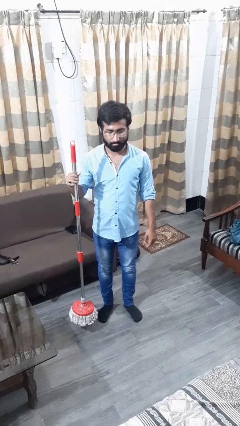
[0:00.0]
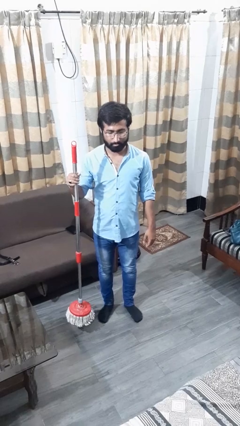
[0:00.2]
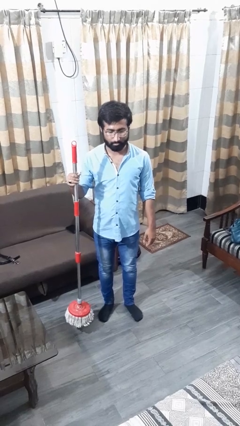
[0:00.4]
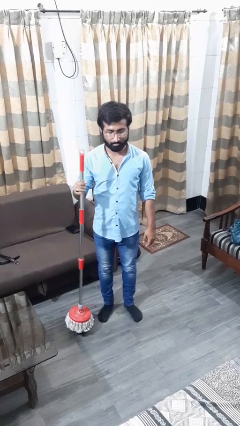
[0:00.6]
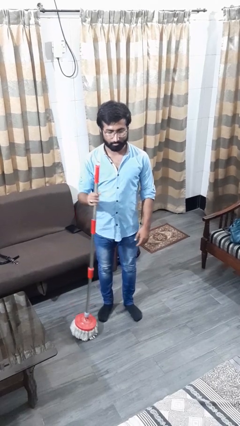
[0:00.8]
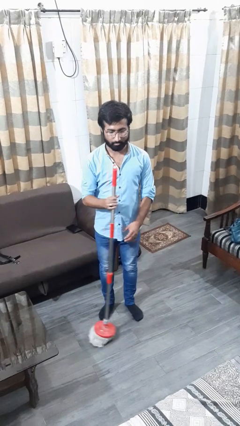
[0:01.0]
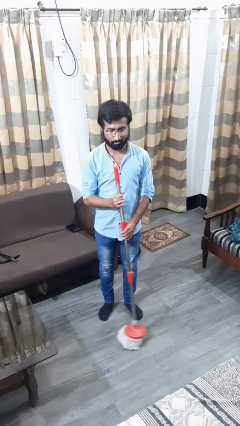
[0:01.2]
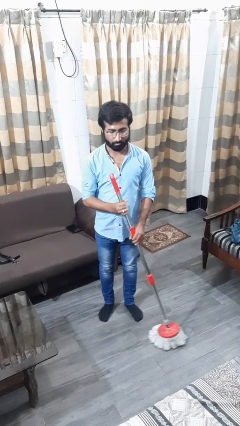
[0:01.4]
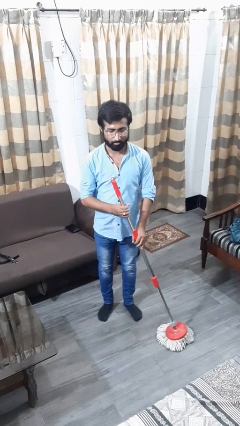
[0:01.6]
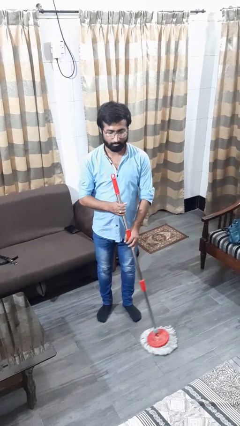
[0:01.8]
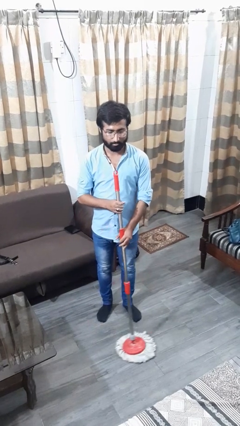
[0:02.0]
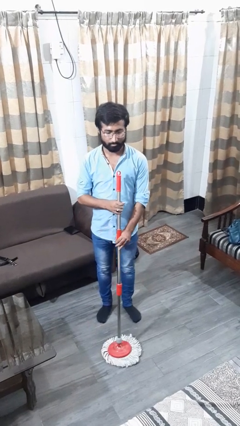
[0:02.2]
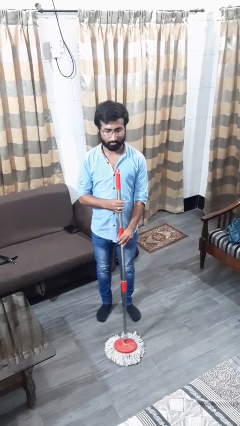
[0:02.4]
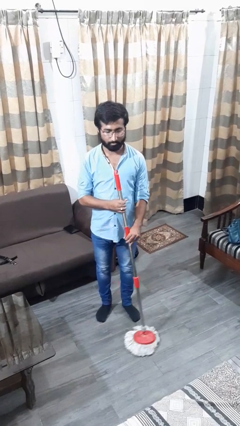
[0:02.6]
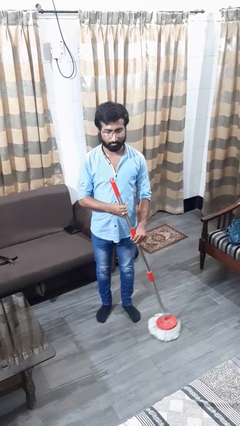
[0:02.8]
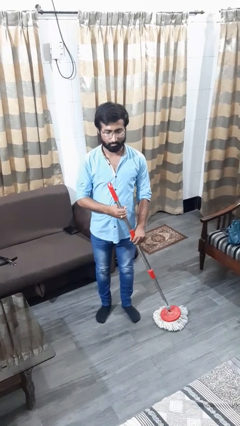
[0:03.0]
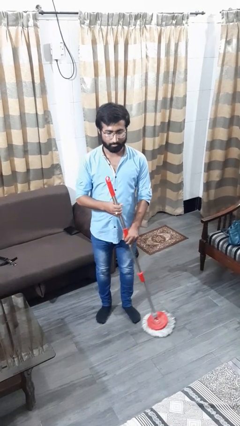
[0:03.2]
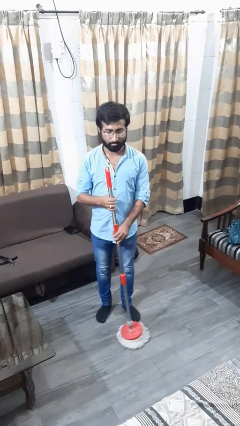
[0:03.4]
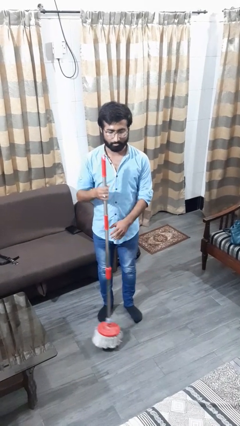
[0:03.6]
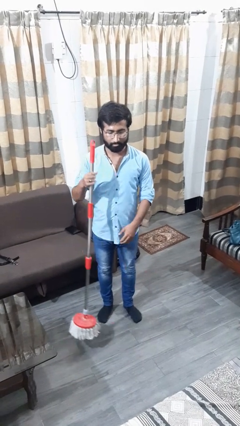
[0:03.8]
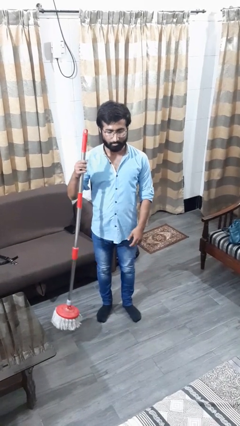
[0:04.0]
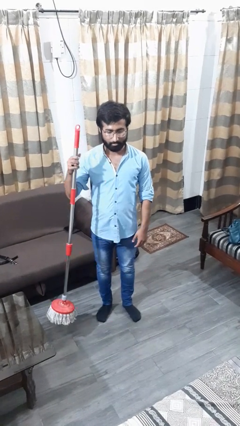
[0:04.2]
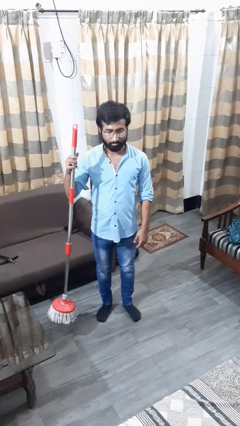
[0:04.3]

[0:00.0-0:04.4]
person sweeps floor

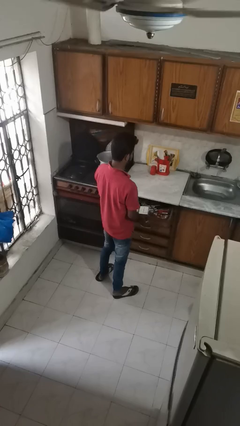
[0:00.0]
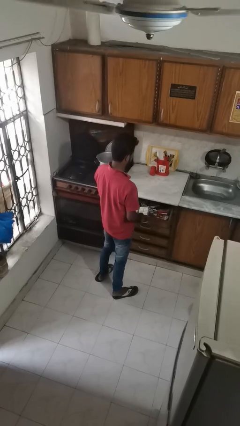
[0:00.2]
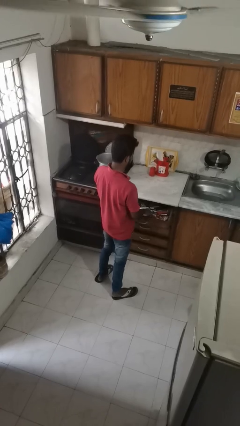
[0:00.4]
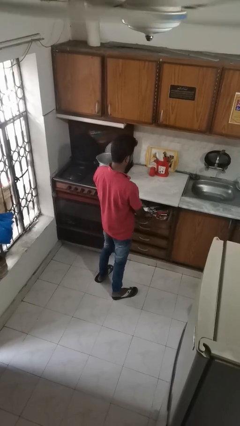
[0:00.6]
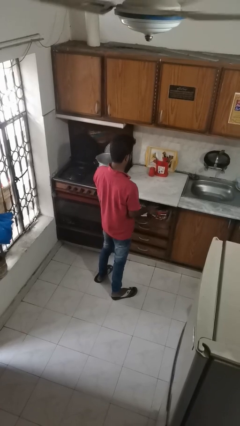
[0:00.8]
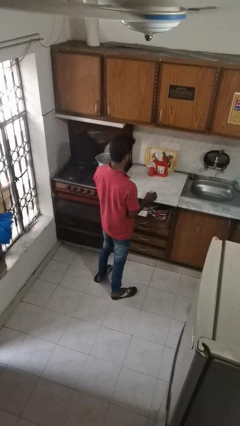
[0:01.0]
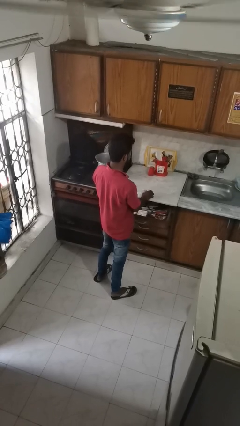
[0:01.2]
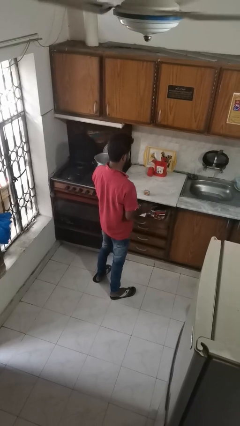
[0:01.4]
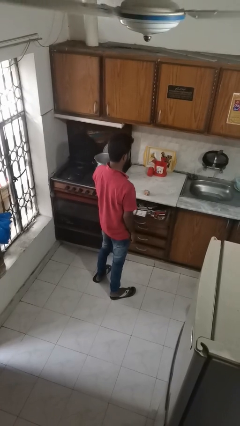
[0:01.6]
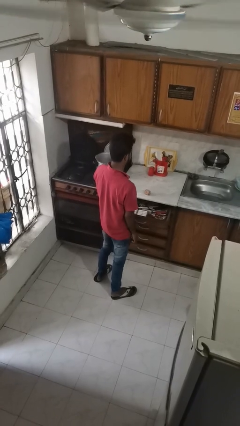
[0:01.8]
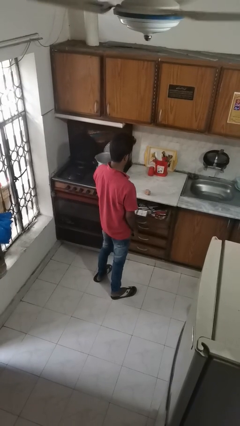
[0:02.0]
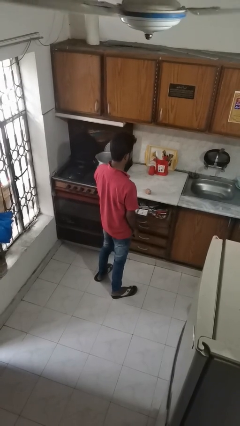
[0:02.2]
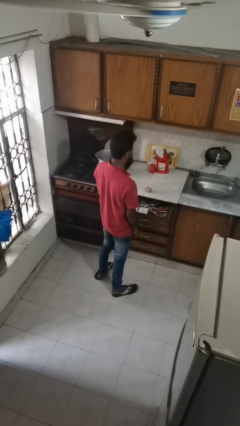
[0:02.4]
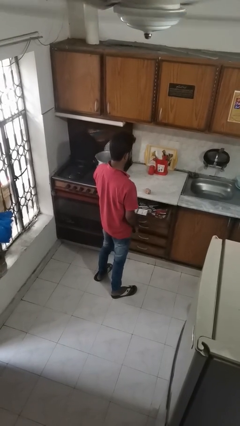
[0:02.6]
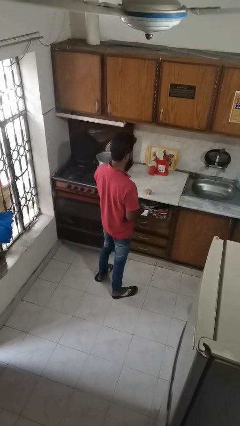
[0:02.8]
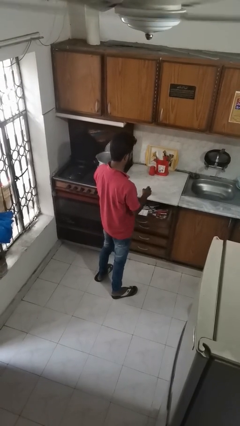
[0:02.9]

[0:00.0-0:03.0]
person takes object from kitchen drawer

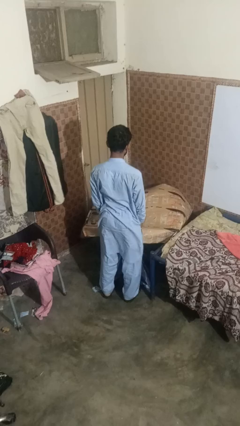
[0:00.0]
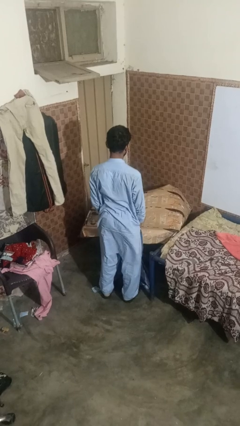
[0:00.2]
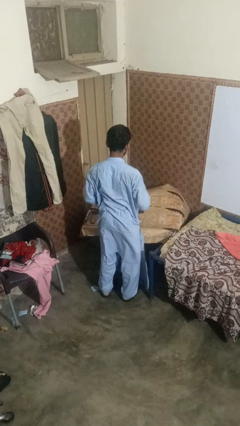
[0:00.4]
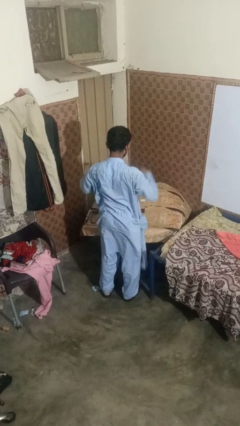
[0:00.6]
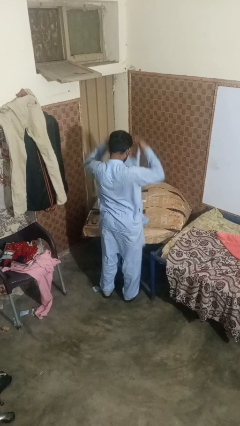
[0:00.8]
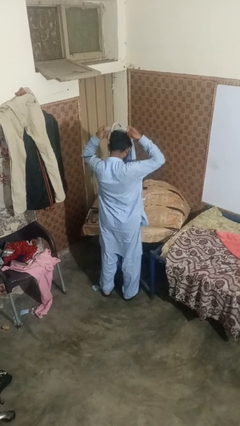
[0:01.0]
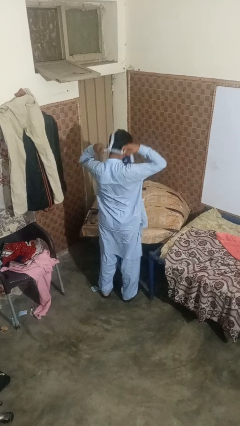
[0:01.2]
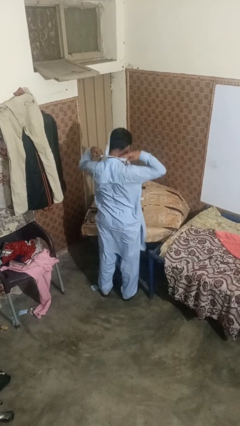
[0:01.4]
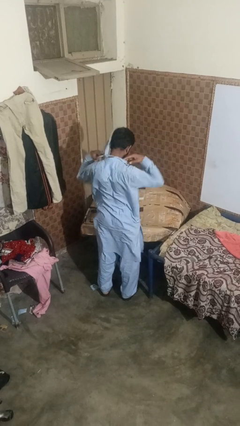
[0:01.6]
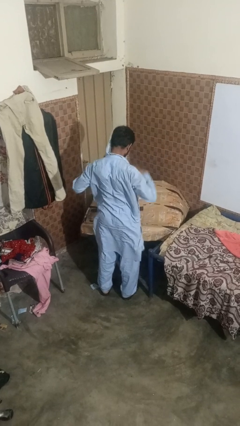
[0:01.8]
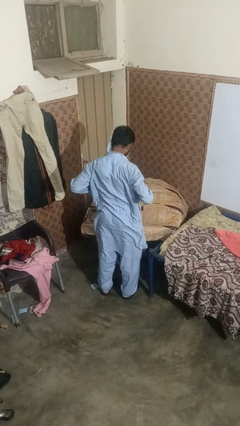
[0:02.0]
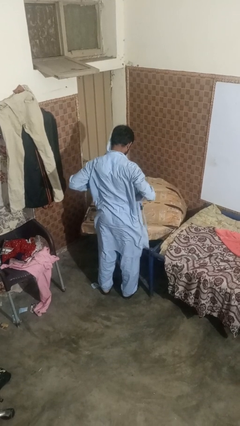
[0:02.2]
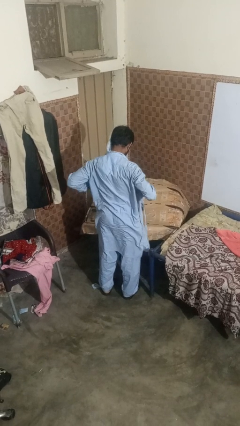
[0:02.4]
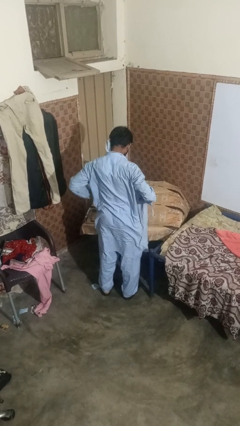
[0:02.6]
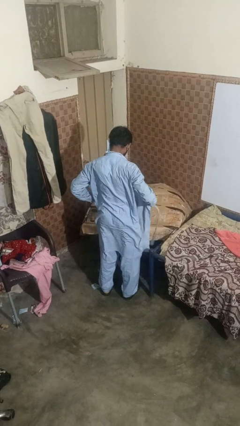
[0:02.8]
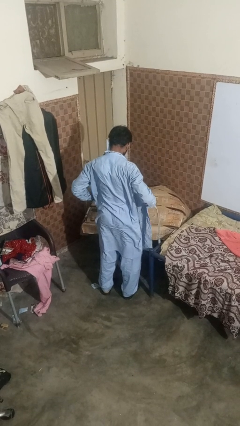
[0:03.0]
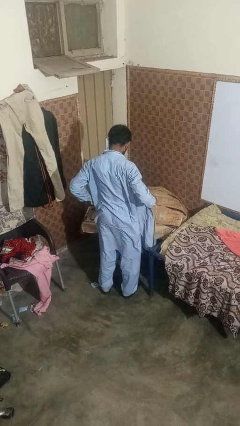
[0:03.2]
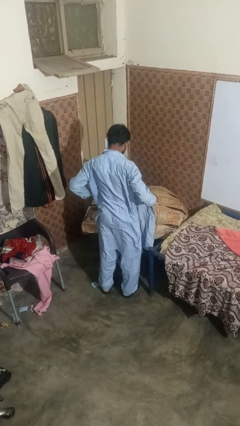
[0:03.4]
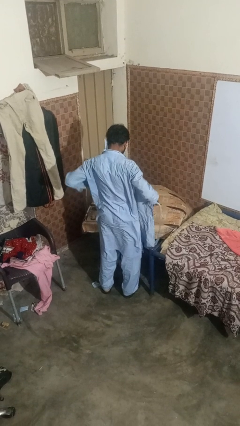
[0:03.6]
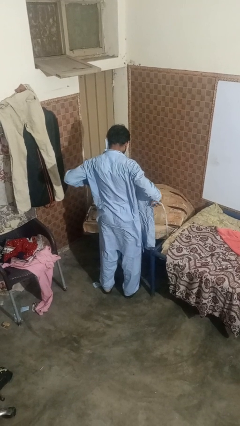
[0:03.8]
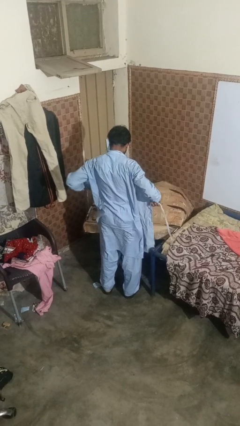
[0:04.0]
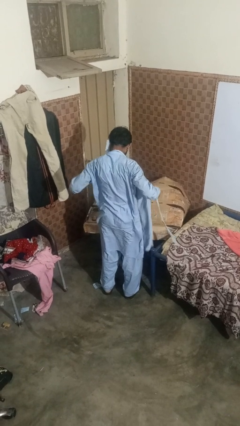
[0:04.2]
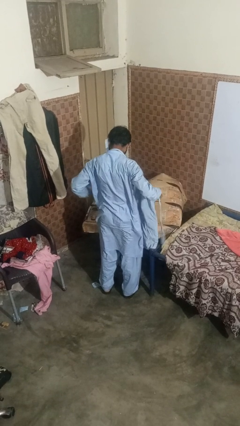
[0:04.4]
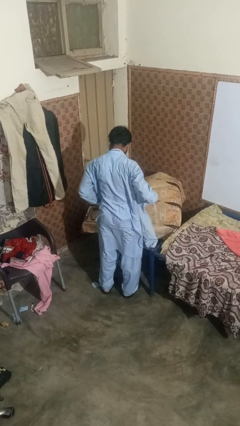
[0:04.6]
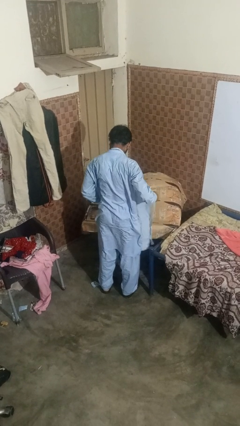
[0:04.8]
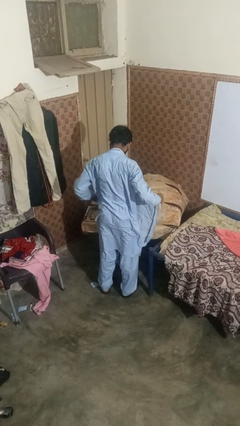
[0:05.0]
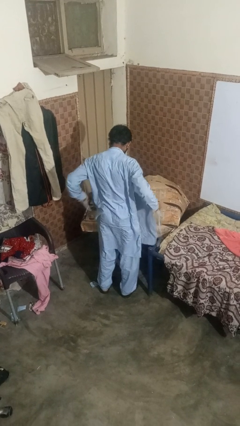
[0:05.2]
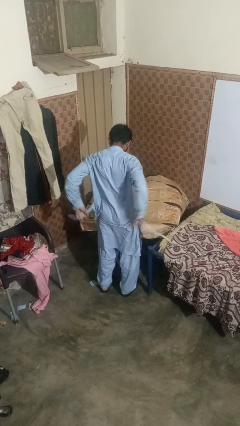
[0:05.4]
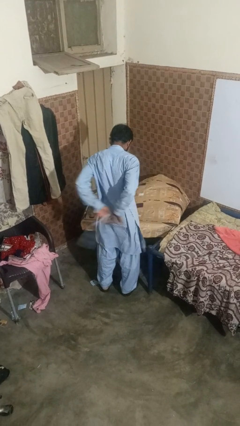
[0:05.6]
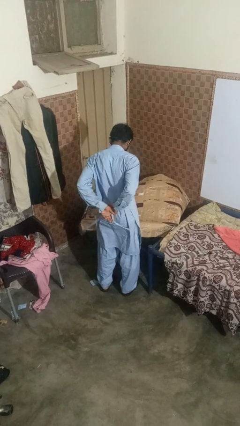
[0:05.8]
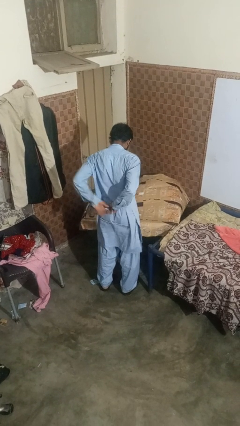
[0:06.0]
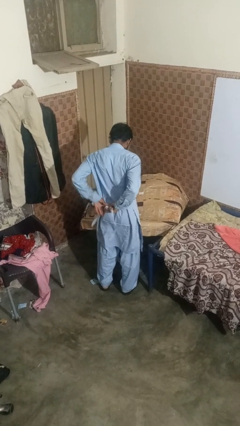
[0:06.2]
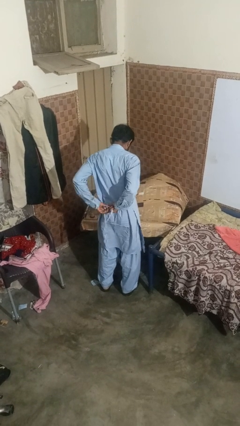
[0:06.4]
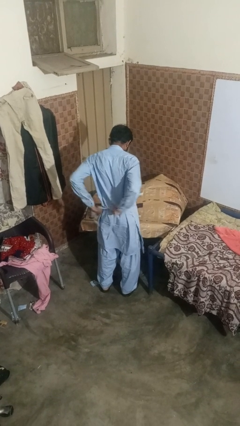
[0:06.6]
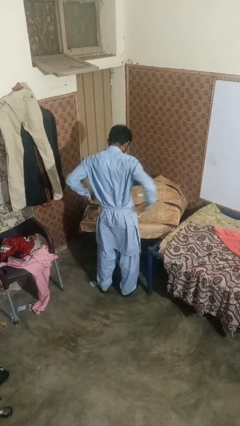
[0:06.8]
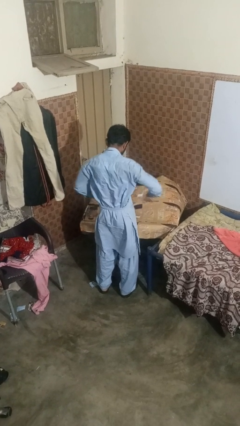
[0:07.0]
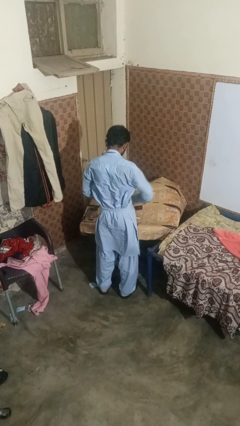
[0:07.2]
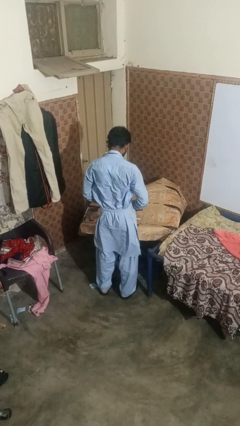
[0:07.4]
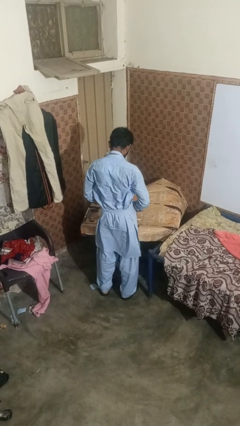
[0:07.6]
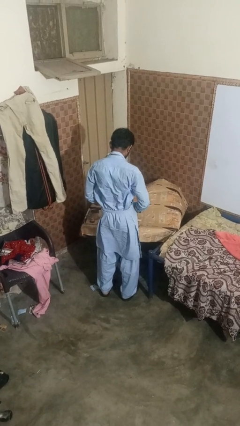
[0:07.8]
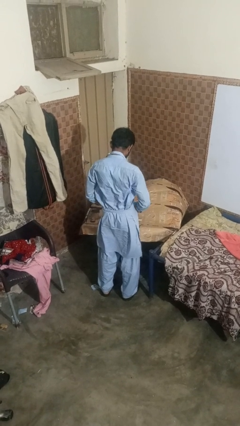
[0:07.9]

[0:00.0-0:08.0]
person puts on apron

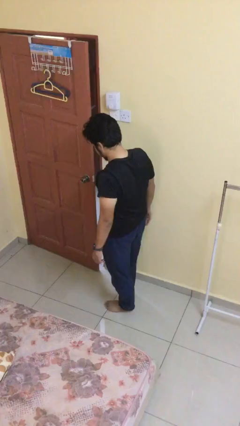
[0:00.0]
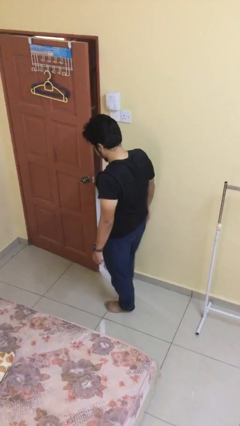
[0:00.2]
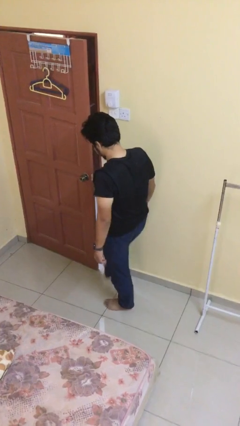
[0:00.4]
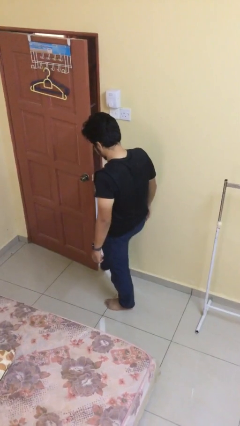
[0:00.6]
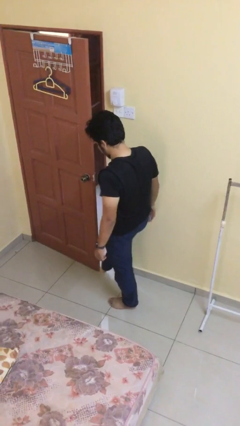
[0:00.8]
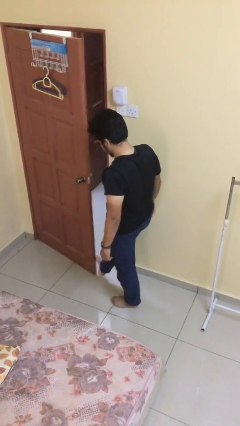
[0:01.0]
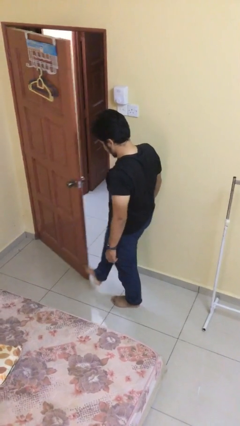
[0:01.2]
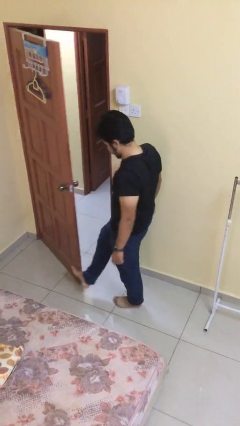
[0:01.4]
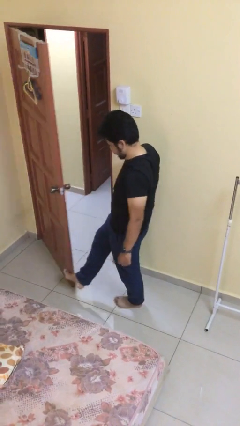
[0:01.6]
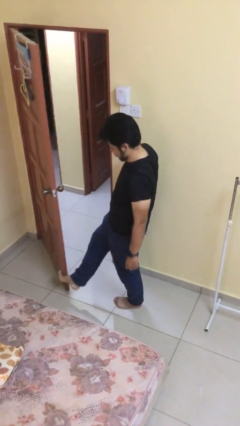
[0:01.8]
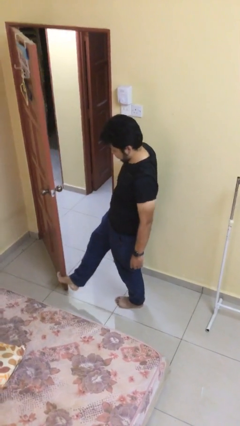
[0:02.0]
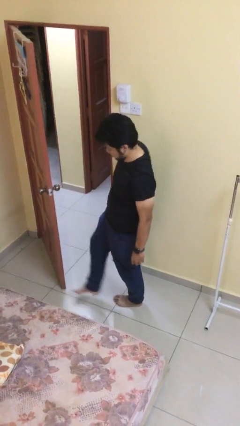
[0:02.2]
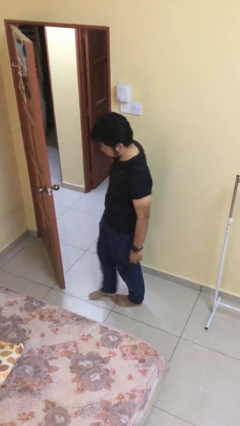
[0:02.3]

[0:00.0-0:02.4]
person opens facility door
